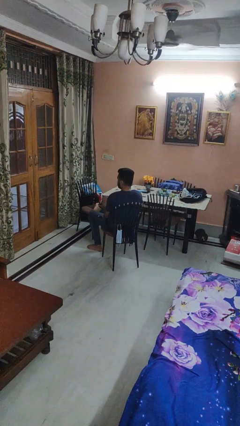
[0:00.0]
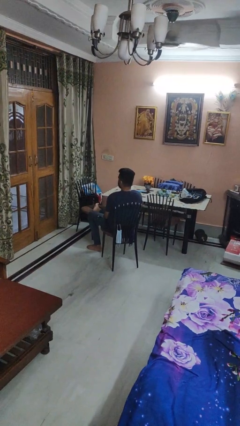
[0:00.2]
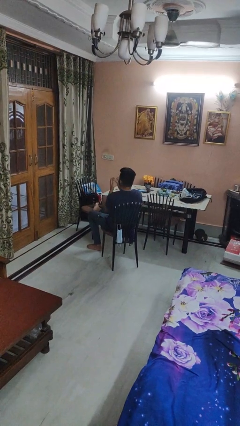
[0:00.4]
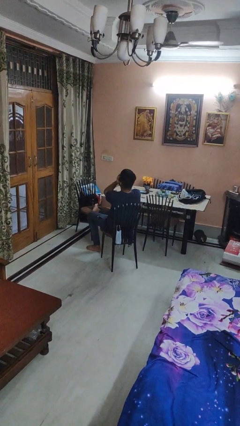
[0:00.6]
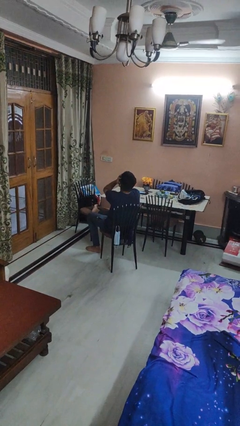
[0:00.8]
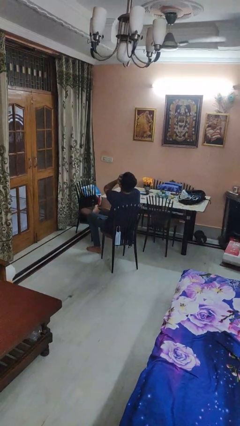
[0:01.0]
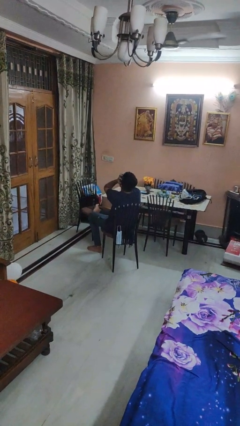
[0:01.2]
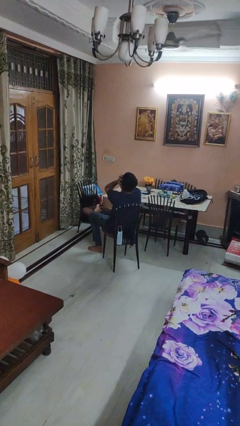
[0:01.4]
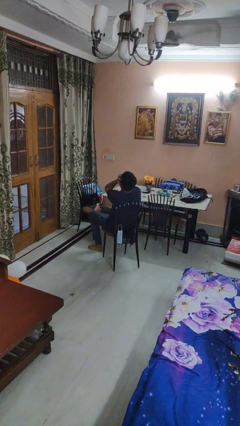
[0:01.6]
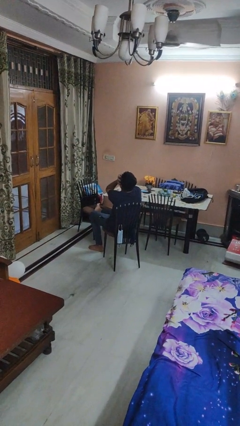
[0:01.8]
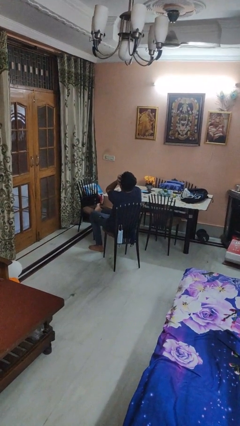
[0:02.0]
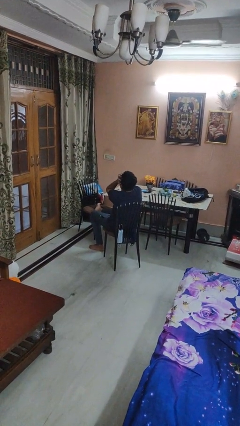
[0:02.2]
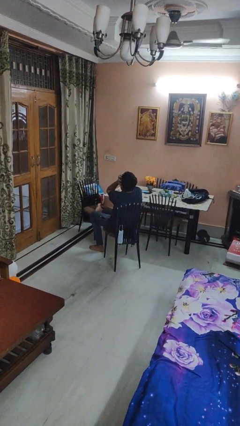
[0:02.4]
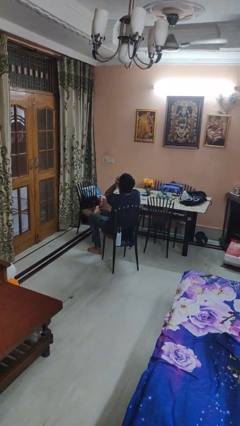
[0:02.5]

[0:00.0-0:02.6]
person covers face with hands

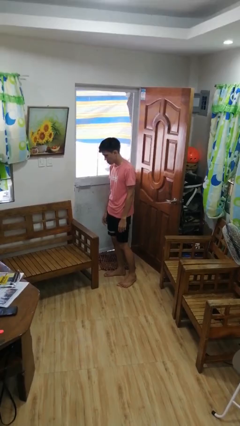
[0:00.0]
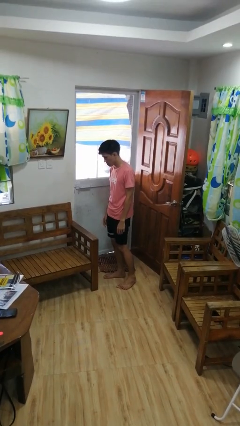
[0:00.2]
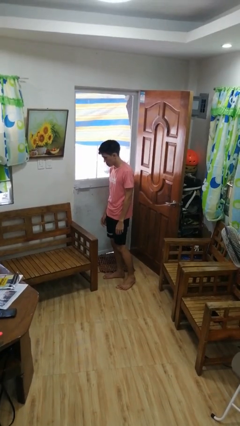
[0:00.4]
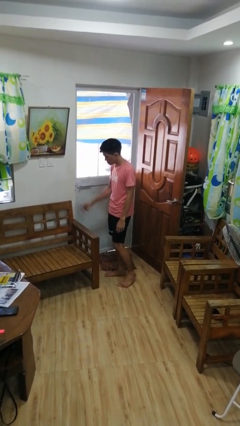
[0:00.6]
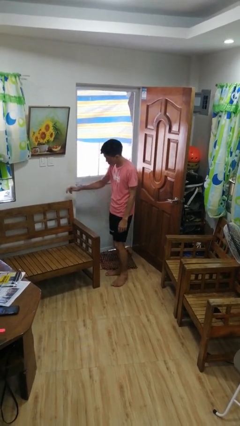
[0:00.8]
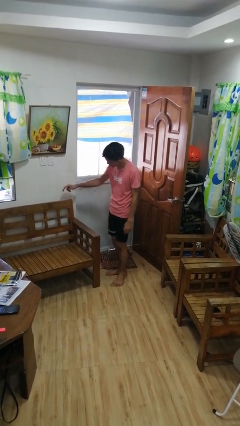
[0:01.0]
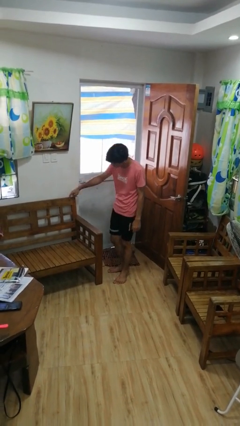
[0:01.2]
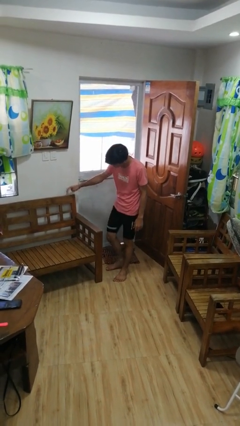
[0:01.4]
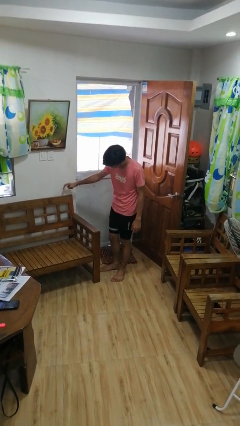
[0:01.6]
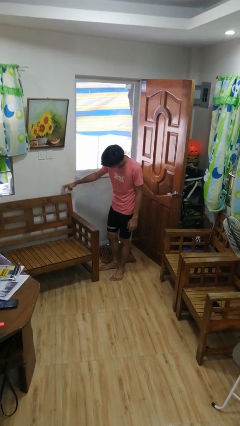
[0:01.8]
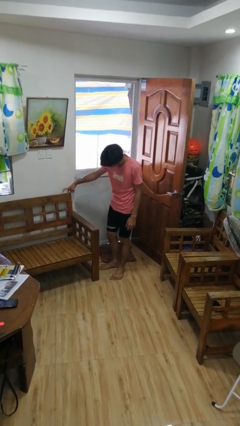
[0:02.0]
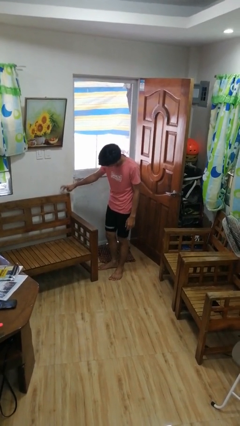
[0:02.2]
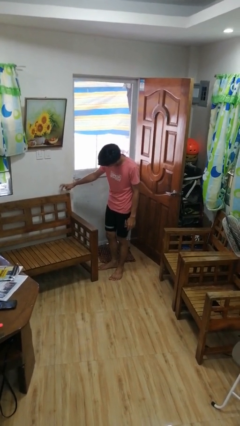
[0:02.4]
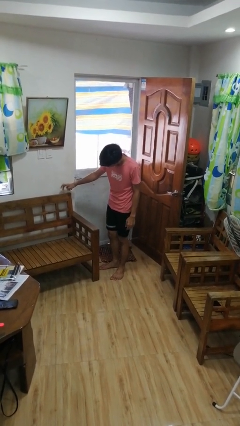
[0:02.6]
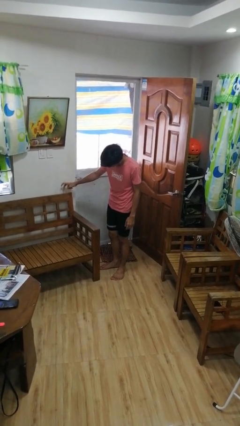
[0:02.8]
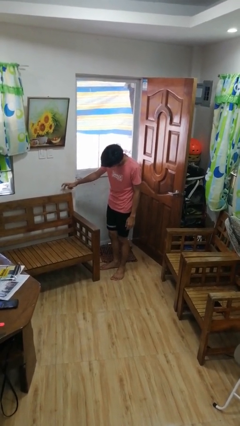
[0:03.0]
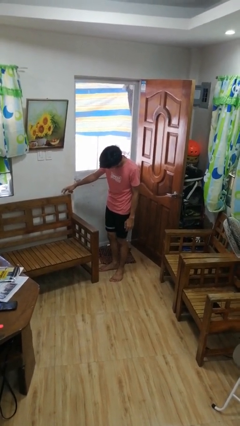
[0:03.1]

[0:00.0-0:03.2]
person taps object with finger

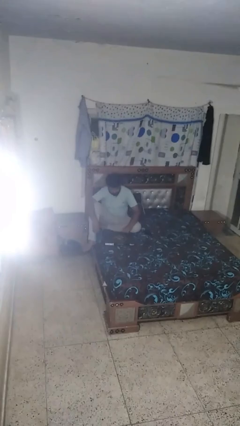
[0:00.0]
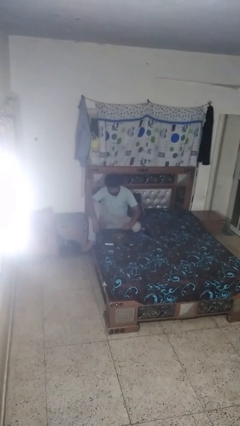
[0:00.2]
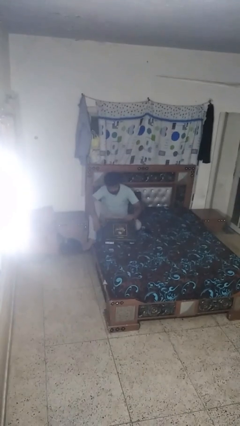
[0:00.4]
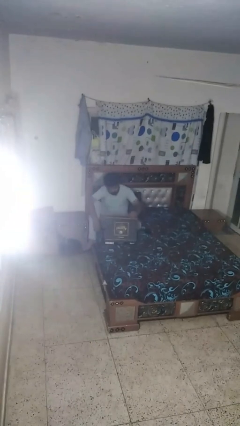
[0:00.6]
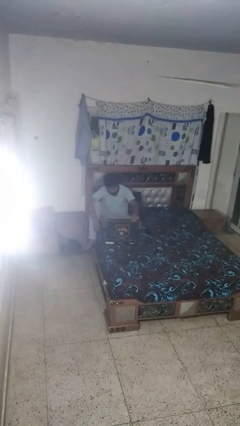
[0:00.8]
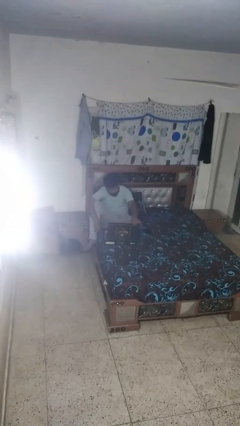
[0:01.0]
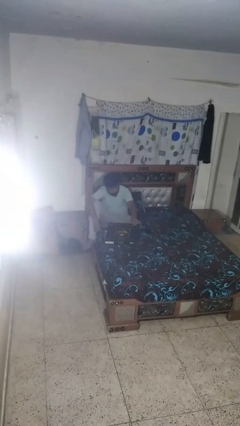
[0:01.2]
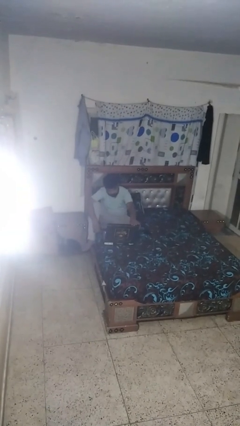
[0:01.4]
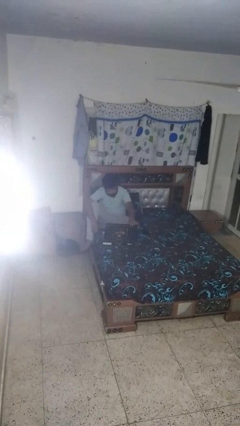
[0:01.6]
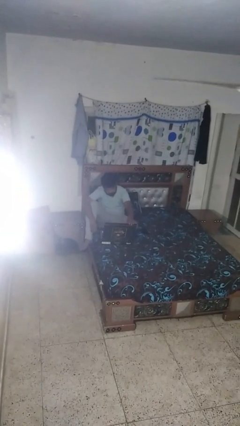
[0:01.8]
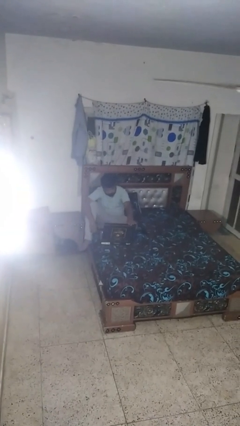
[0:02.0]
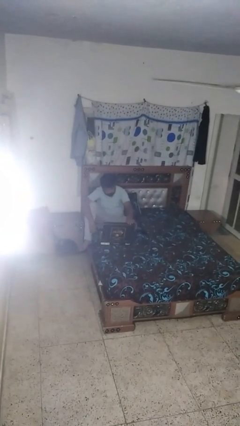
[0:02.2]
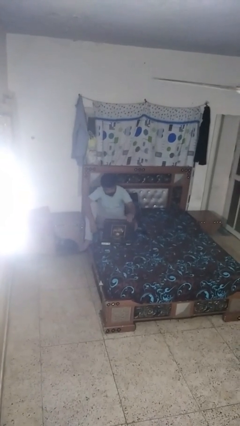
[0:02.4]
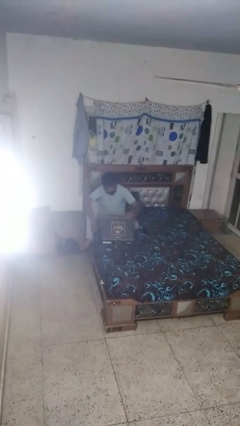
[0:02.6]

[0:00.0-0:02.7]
person opens laptop

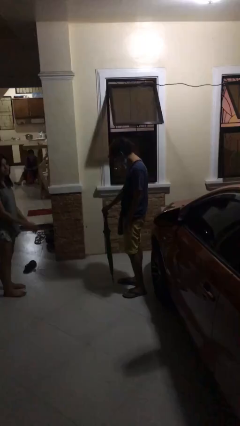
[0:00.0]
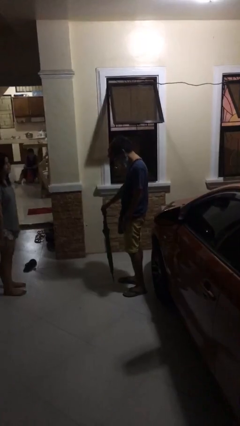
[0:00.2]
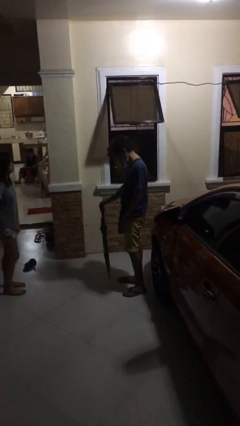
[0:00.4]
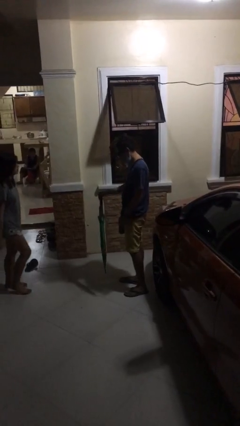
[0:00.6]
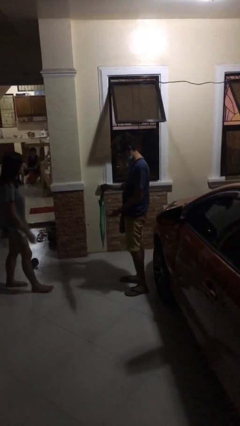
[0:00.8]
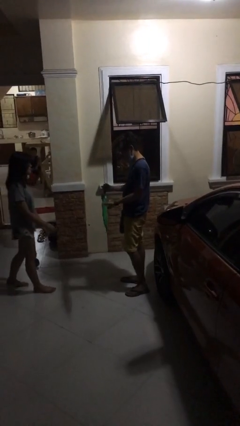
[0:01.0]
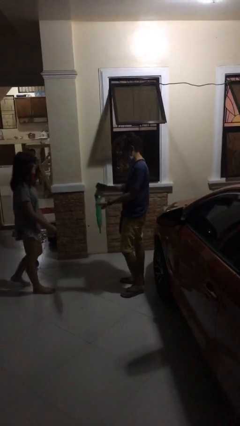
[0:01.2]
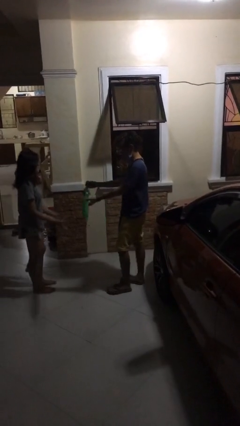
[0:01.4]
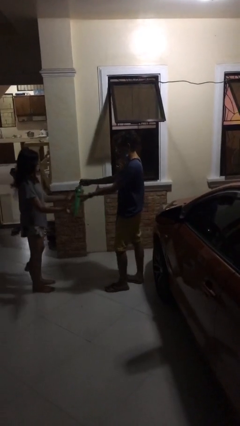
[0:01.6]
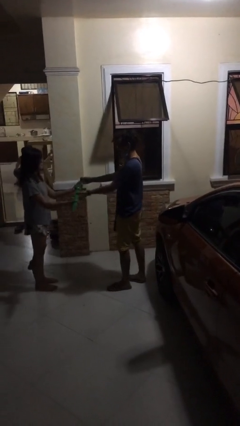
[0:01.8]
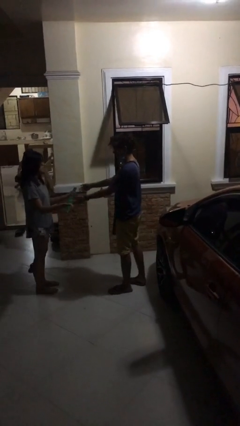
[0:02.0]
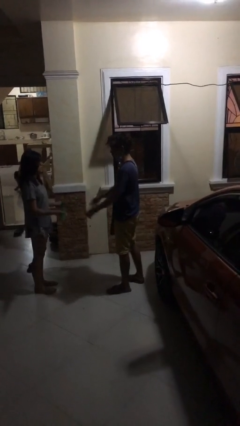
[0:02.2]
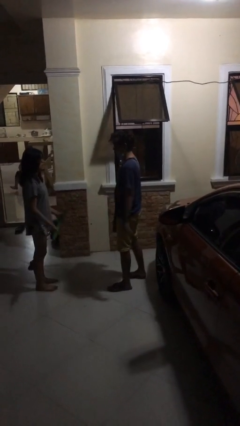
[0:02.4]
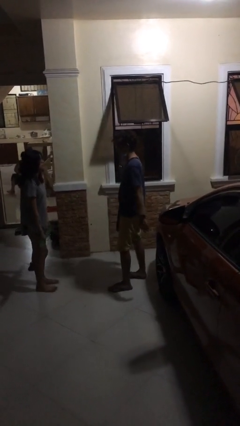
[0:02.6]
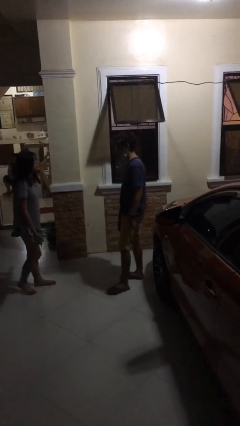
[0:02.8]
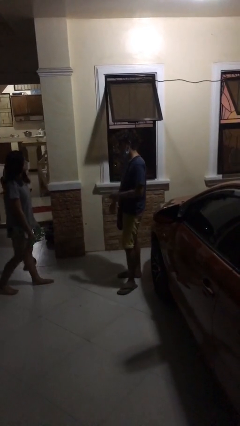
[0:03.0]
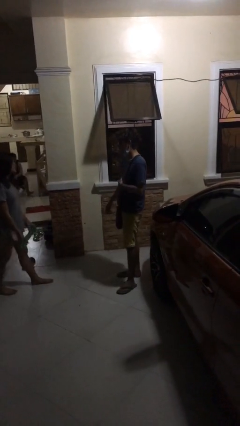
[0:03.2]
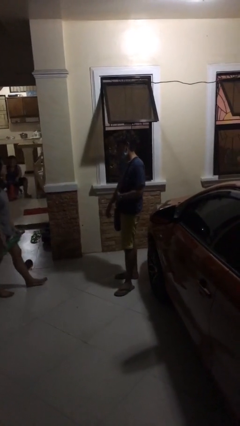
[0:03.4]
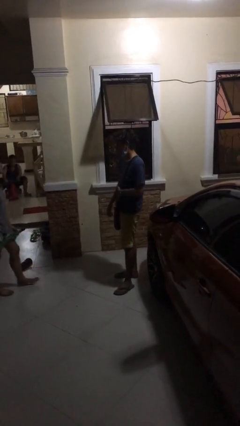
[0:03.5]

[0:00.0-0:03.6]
person transfers object to person

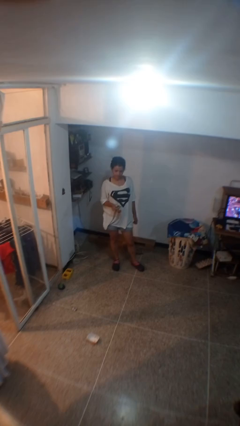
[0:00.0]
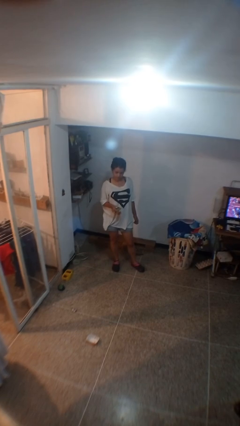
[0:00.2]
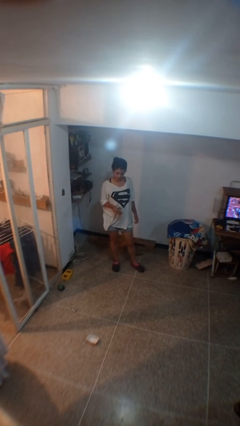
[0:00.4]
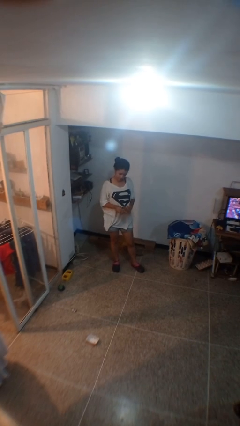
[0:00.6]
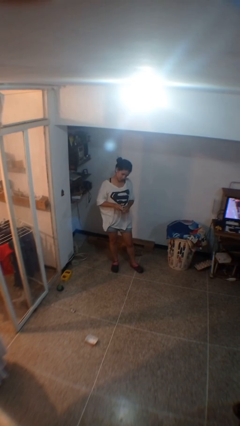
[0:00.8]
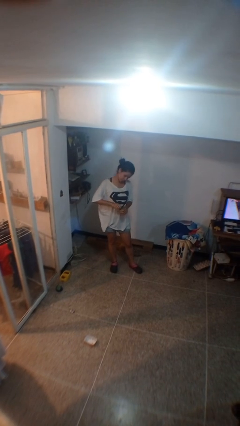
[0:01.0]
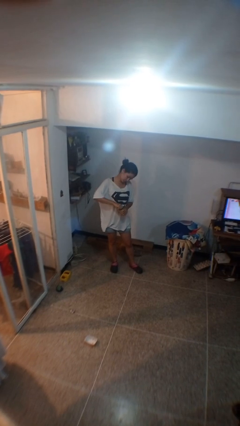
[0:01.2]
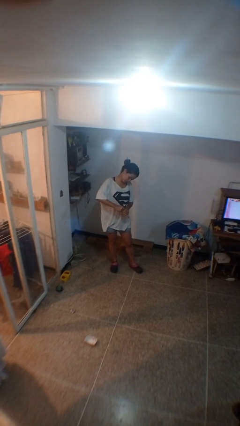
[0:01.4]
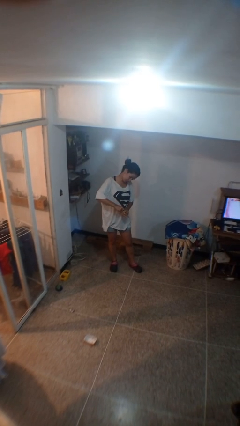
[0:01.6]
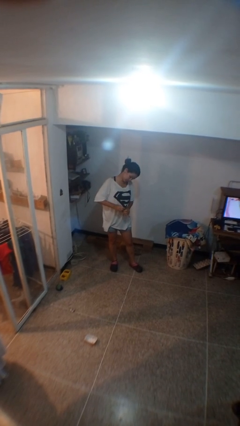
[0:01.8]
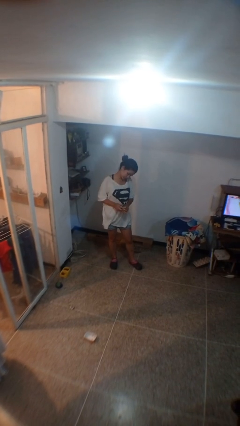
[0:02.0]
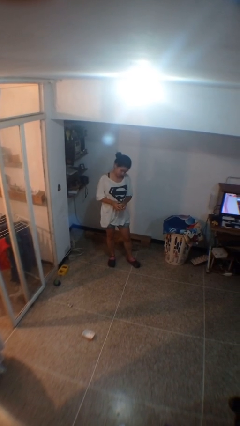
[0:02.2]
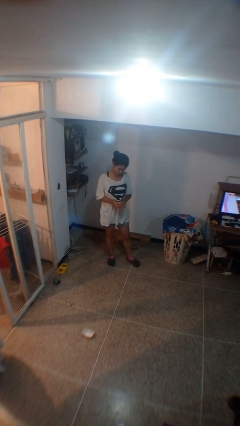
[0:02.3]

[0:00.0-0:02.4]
person opens beverage can

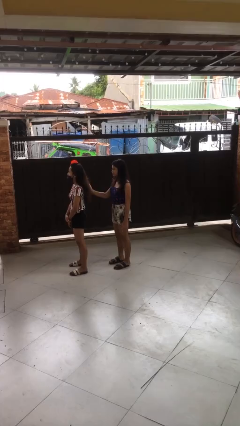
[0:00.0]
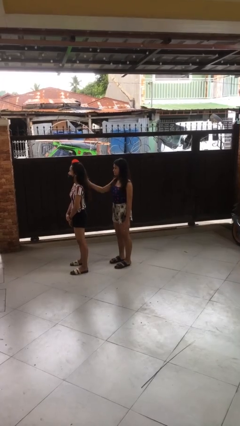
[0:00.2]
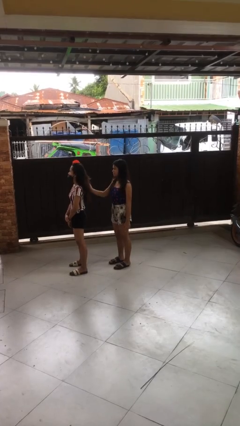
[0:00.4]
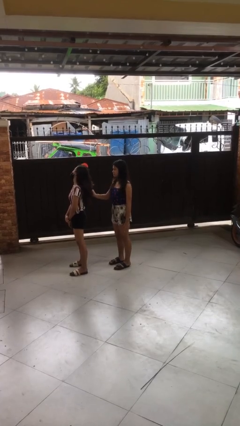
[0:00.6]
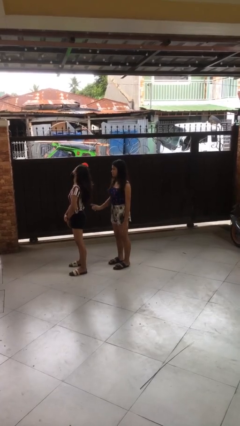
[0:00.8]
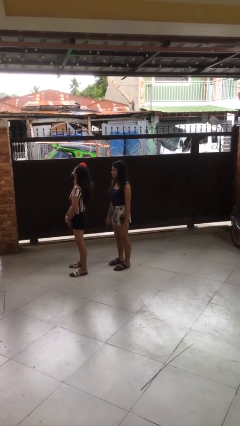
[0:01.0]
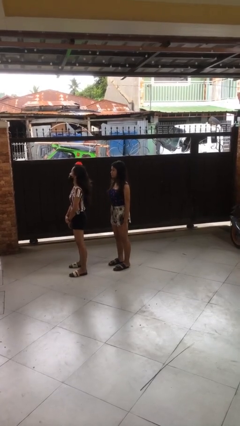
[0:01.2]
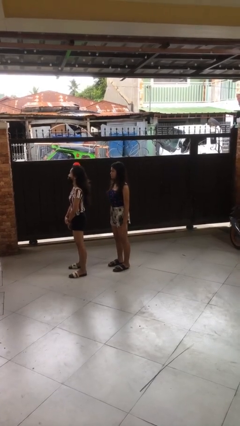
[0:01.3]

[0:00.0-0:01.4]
person grabs person by hair

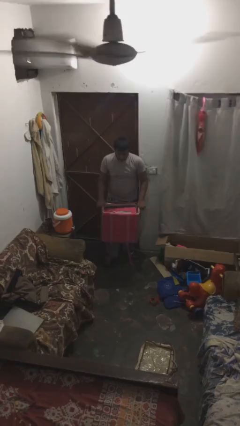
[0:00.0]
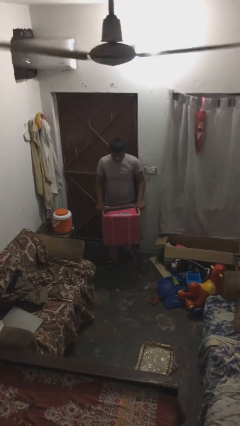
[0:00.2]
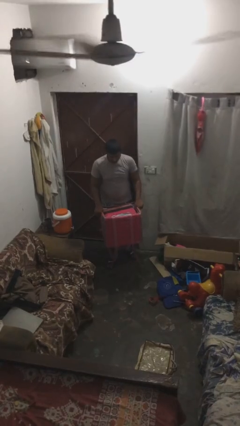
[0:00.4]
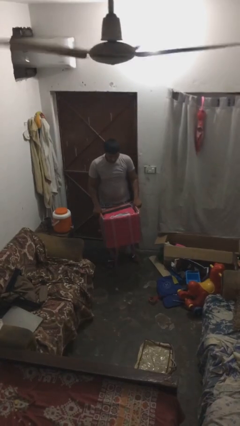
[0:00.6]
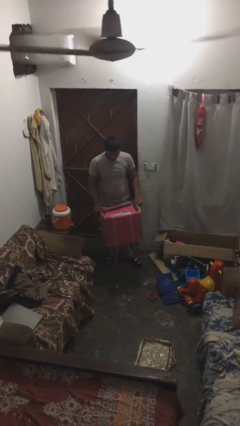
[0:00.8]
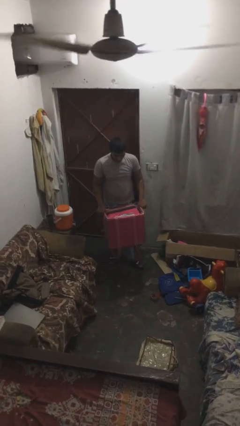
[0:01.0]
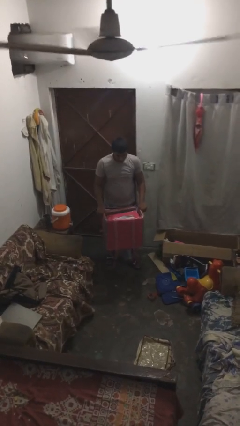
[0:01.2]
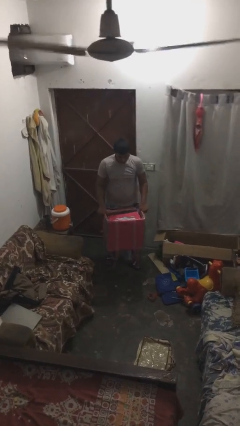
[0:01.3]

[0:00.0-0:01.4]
person carries heavy object
